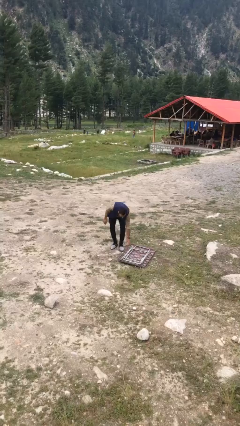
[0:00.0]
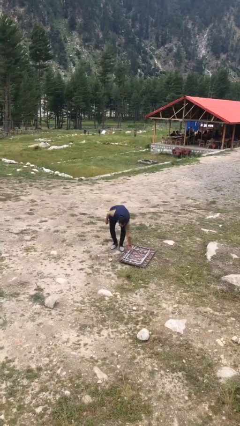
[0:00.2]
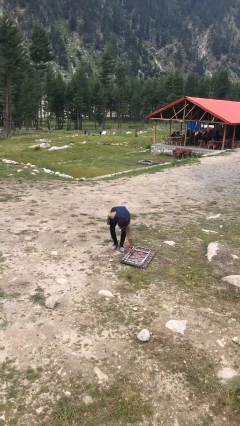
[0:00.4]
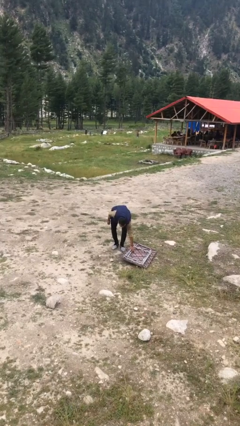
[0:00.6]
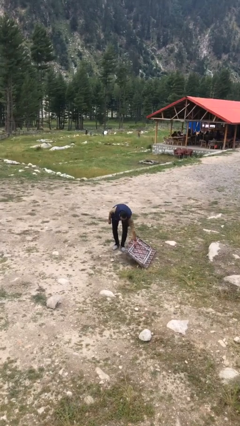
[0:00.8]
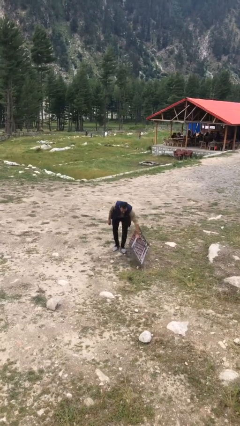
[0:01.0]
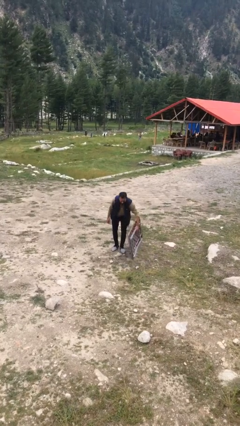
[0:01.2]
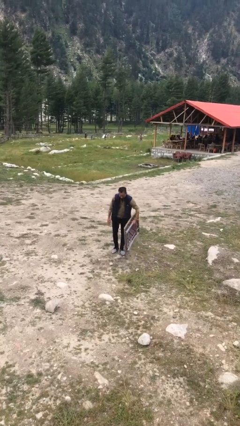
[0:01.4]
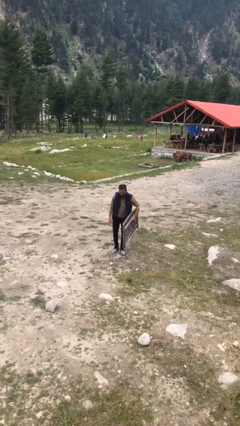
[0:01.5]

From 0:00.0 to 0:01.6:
person picks up object from floor

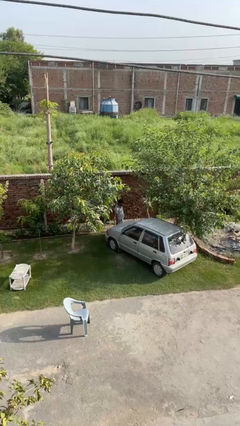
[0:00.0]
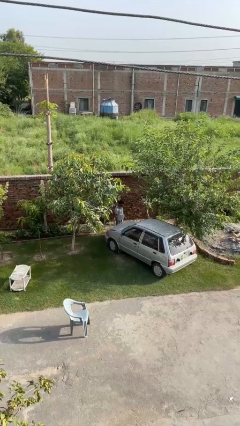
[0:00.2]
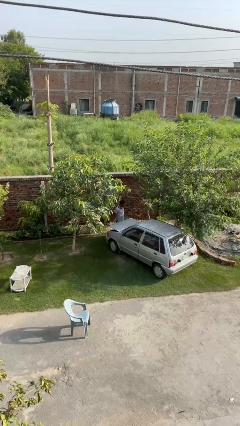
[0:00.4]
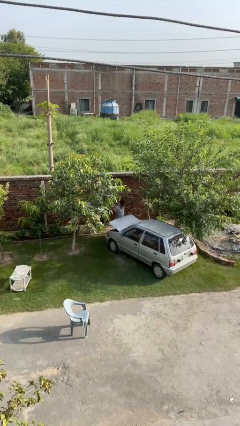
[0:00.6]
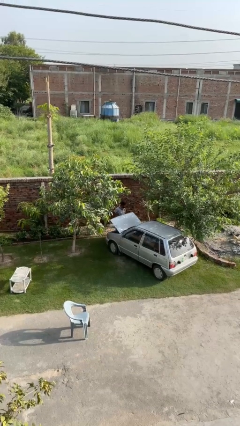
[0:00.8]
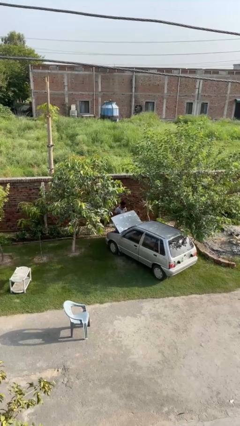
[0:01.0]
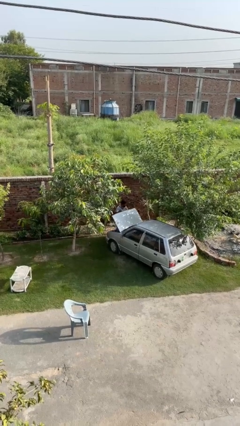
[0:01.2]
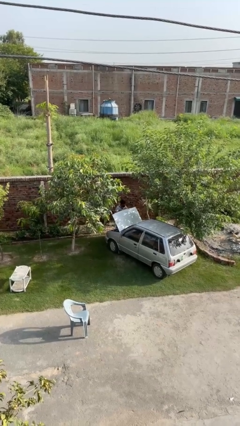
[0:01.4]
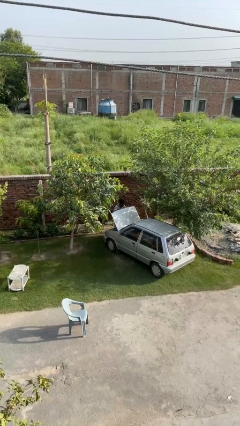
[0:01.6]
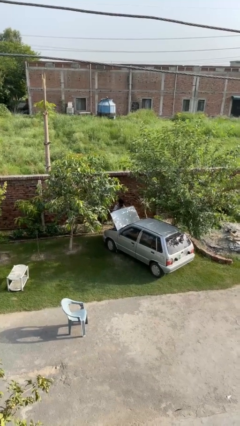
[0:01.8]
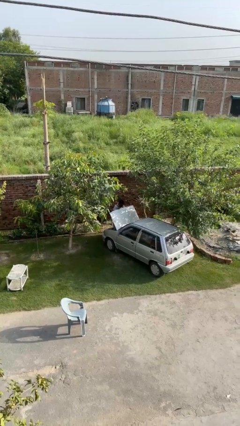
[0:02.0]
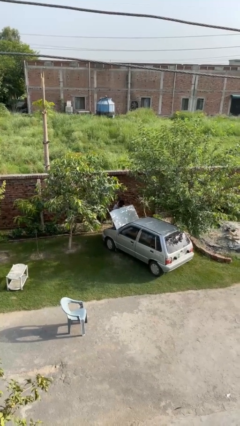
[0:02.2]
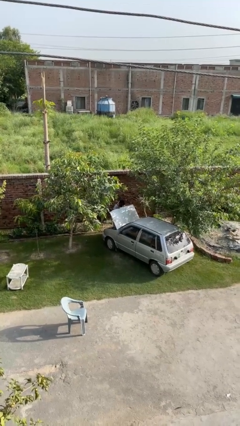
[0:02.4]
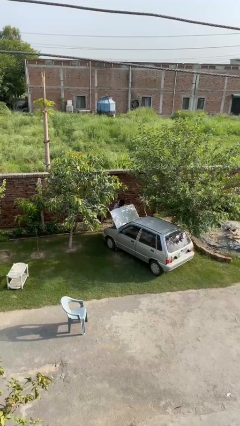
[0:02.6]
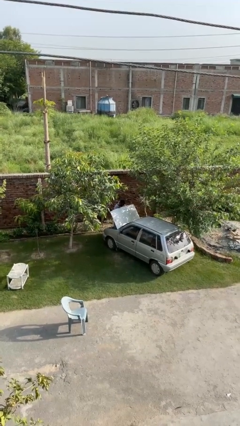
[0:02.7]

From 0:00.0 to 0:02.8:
person opens car hood

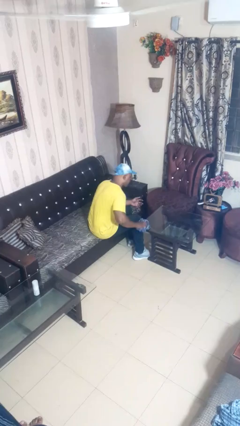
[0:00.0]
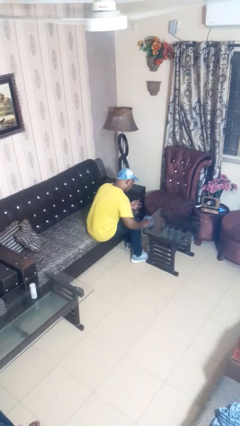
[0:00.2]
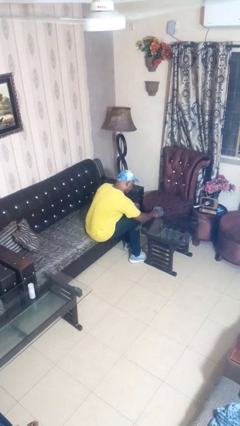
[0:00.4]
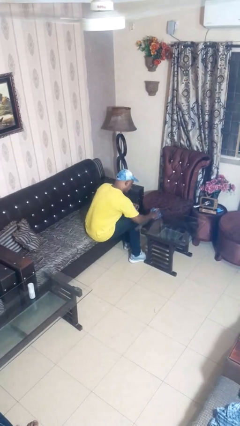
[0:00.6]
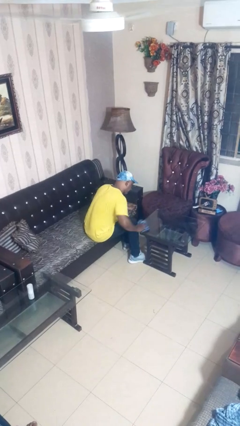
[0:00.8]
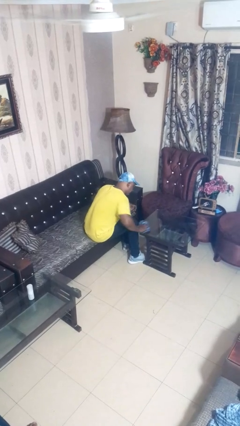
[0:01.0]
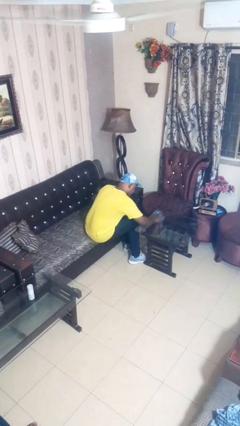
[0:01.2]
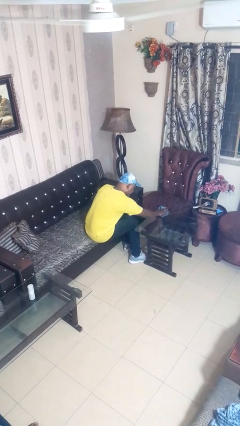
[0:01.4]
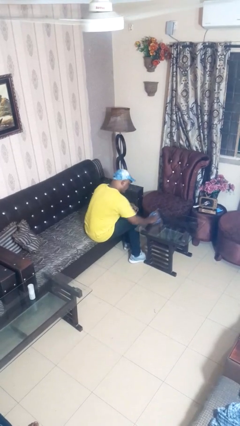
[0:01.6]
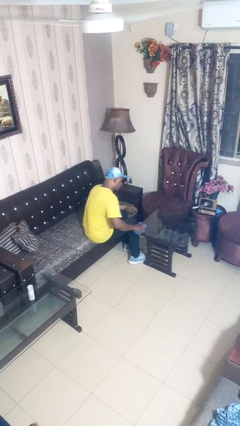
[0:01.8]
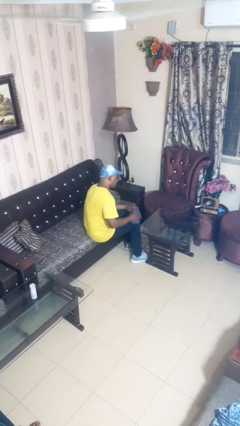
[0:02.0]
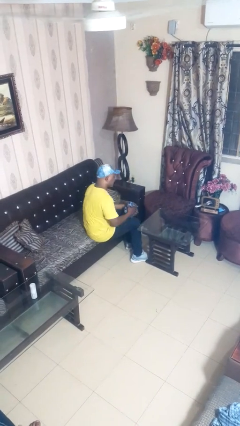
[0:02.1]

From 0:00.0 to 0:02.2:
person cleans table with rag

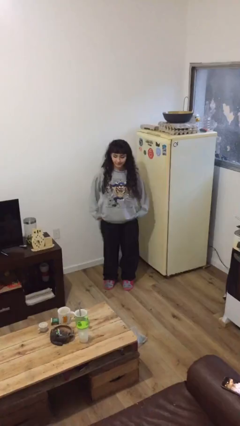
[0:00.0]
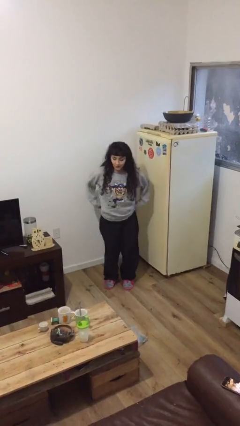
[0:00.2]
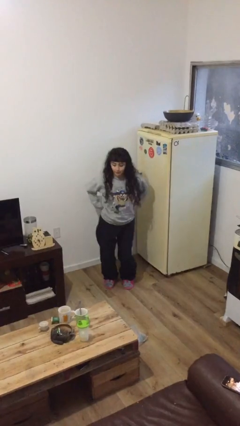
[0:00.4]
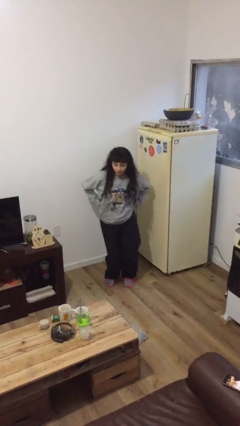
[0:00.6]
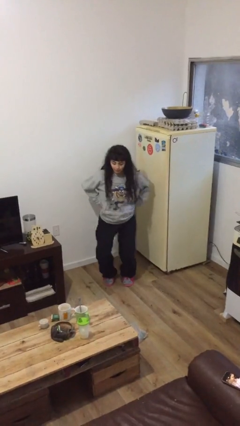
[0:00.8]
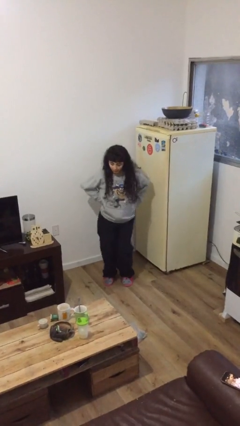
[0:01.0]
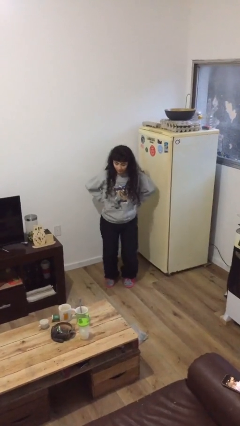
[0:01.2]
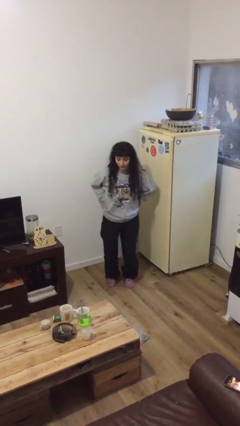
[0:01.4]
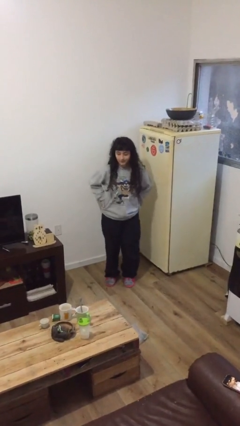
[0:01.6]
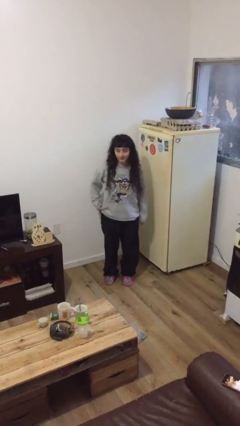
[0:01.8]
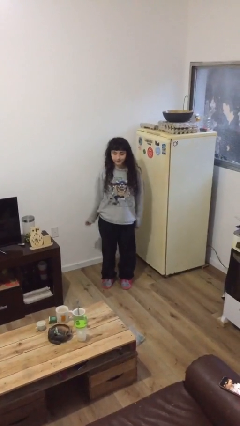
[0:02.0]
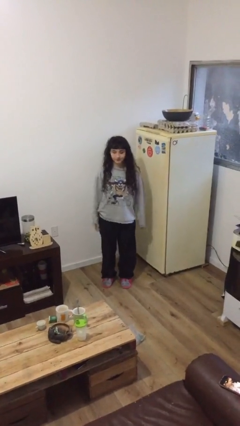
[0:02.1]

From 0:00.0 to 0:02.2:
person wiggles hips

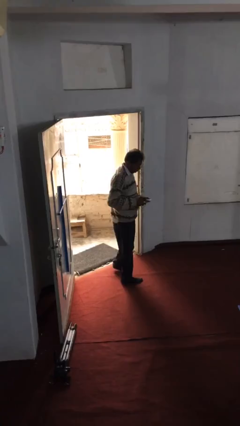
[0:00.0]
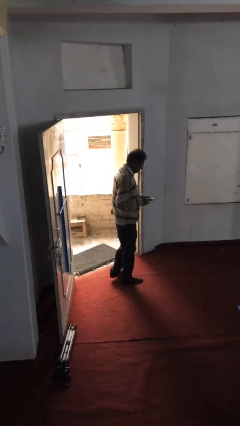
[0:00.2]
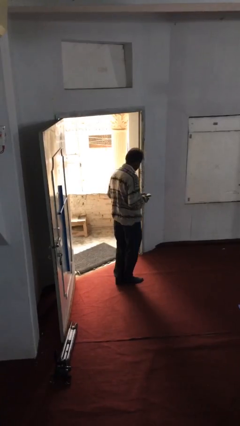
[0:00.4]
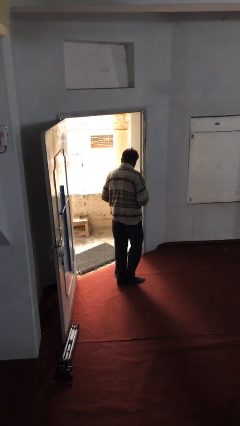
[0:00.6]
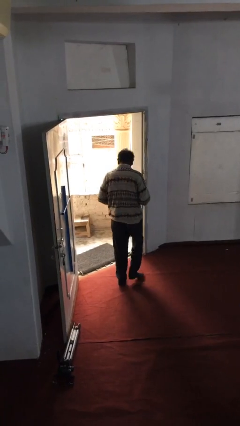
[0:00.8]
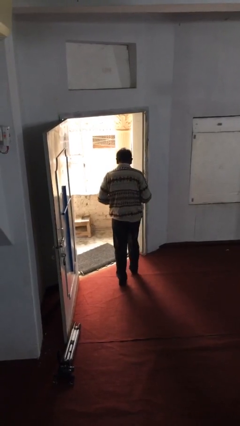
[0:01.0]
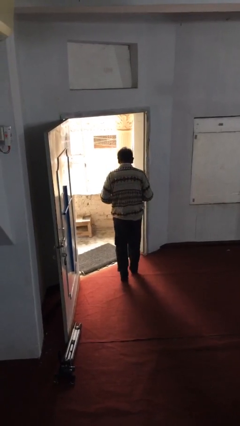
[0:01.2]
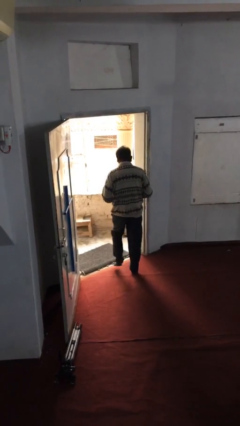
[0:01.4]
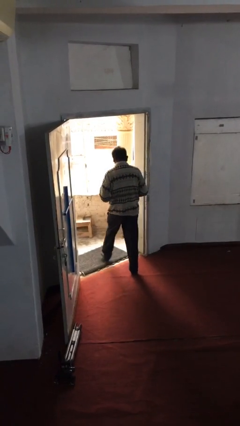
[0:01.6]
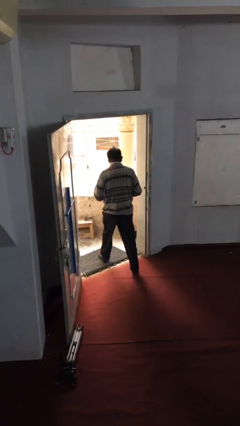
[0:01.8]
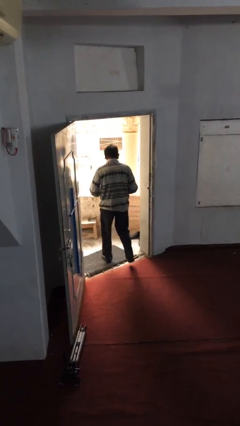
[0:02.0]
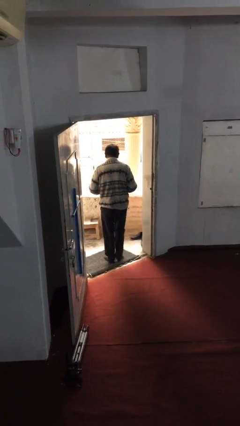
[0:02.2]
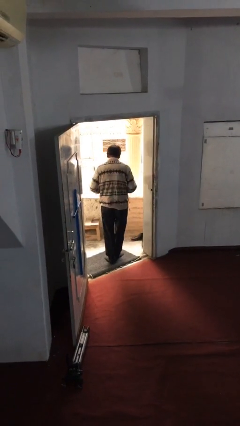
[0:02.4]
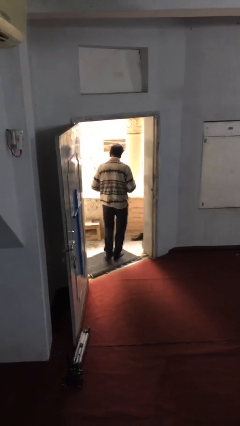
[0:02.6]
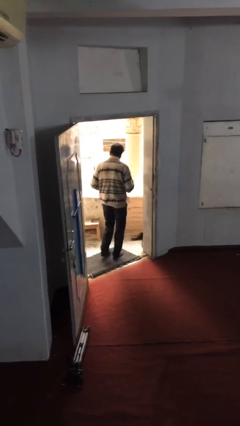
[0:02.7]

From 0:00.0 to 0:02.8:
person exits scene through structure

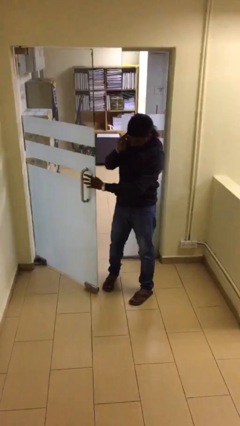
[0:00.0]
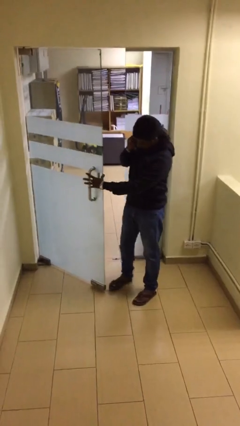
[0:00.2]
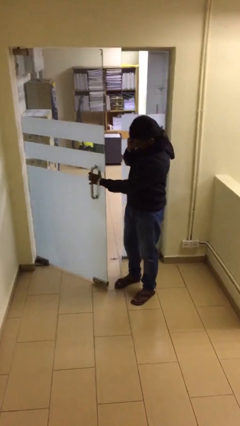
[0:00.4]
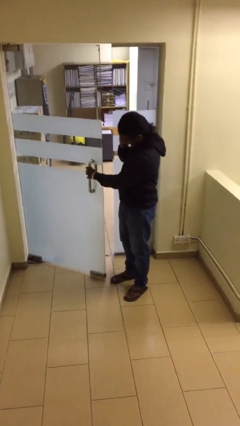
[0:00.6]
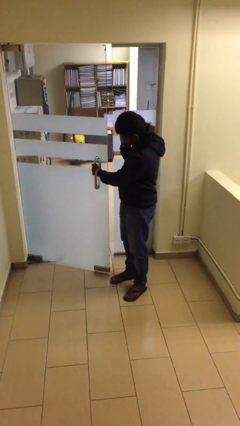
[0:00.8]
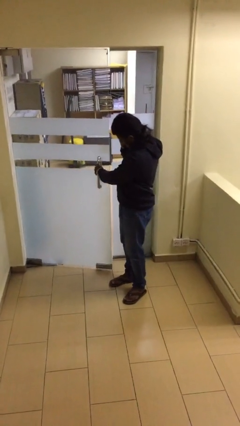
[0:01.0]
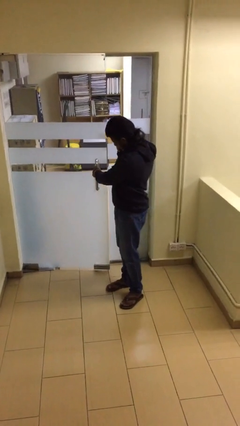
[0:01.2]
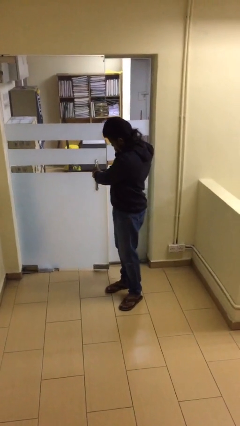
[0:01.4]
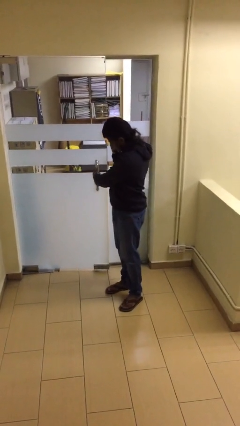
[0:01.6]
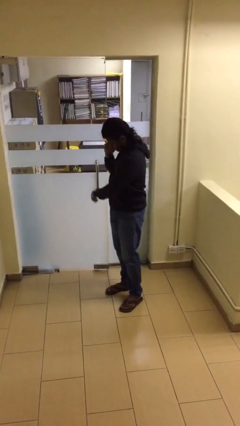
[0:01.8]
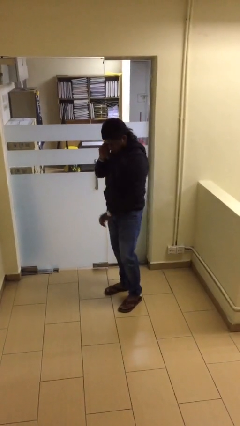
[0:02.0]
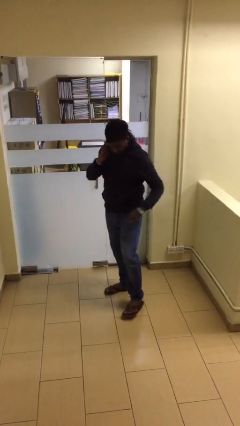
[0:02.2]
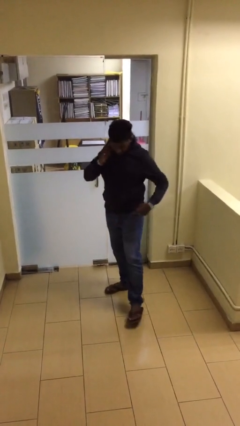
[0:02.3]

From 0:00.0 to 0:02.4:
person closes facility door

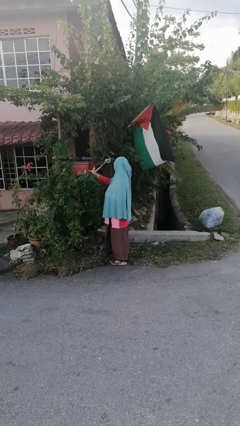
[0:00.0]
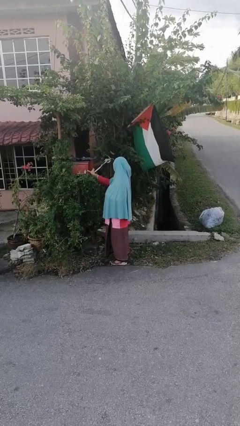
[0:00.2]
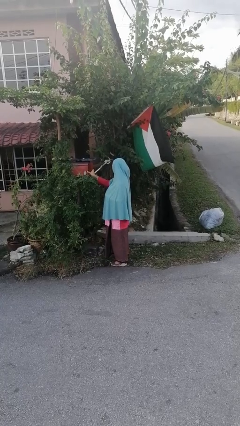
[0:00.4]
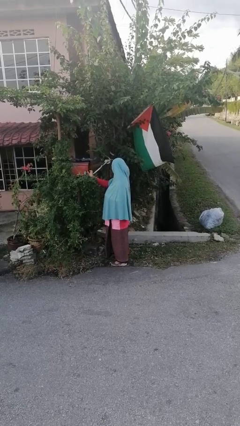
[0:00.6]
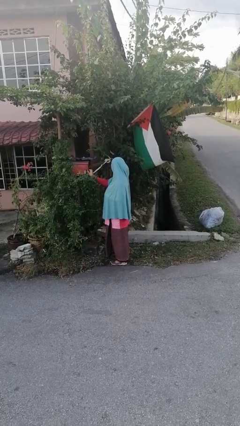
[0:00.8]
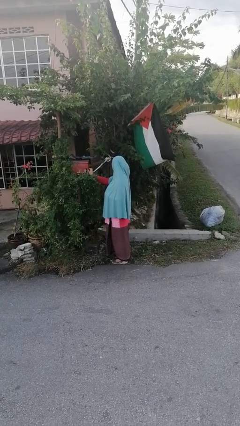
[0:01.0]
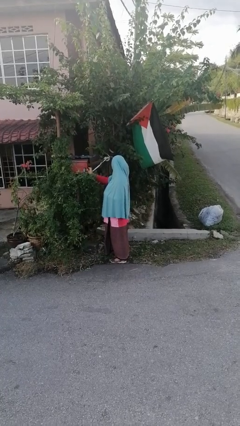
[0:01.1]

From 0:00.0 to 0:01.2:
person closes mailbox

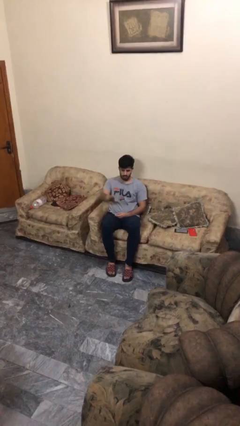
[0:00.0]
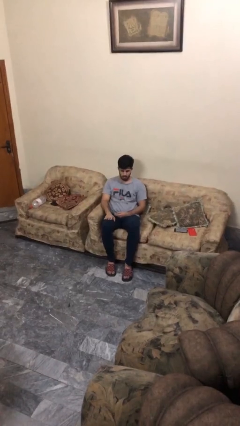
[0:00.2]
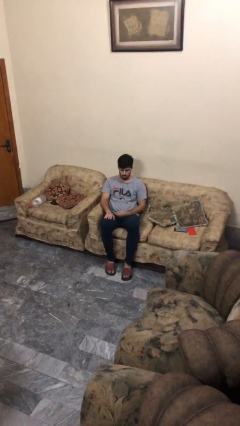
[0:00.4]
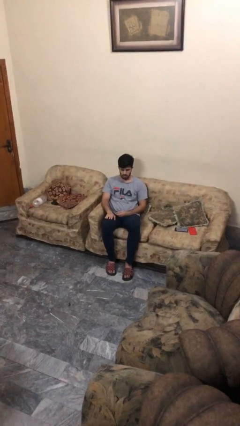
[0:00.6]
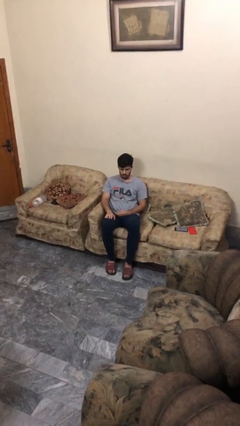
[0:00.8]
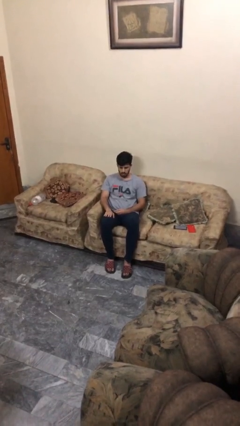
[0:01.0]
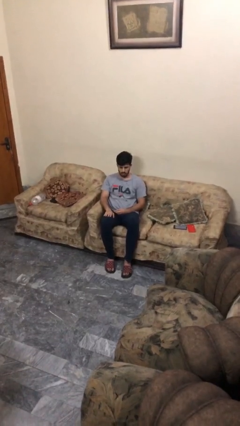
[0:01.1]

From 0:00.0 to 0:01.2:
person gestures lower hand

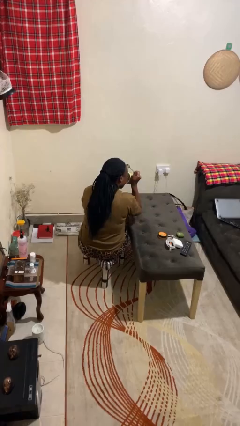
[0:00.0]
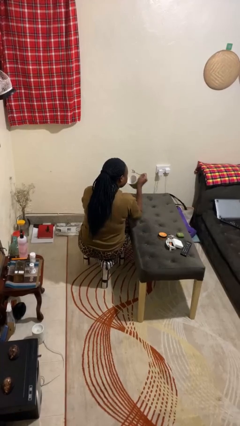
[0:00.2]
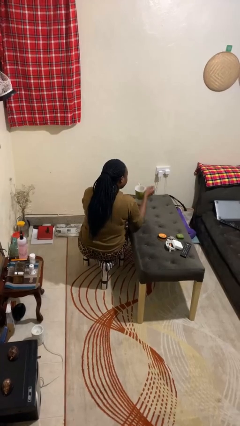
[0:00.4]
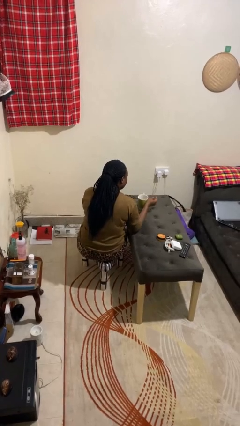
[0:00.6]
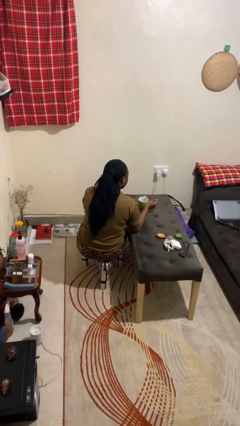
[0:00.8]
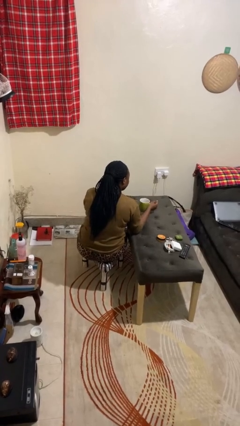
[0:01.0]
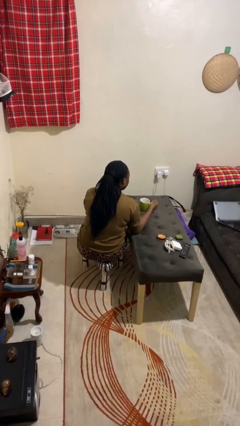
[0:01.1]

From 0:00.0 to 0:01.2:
person stirs mug
